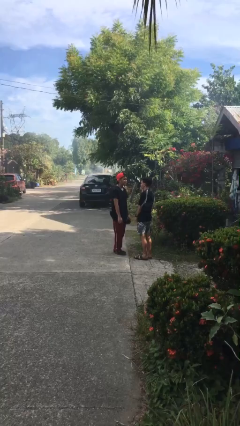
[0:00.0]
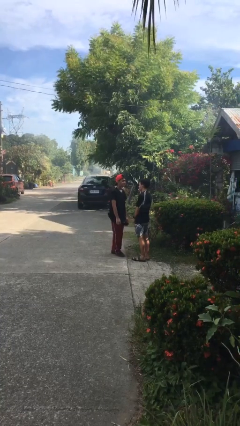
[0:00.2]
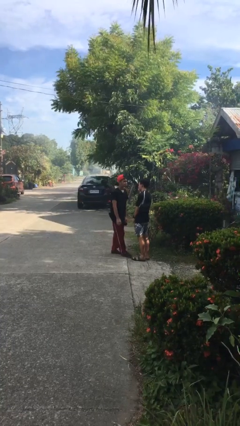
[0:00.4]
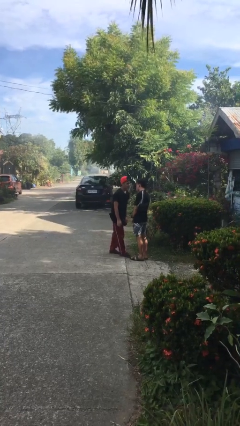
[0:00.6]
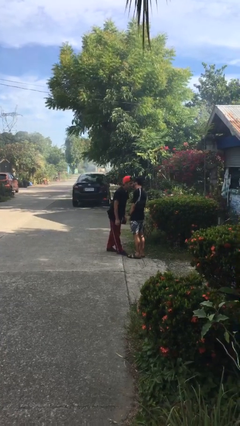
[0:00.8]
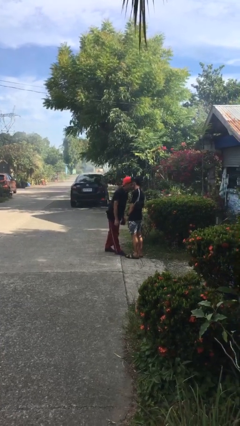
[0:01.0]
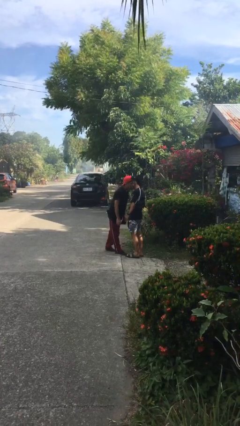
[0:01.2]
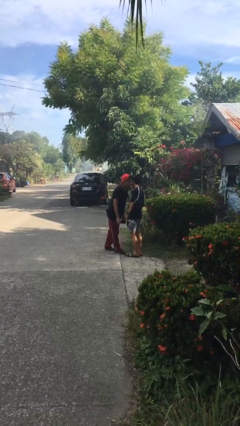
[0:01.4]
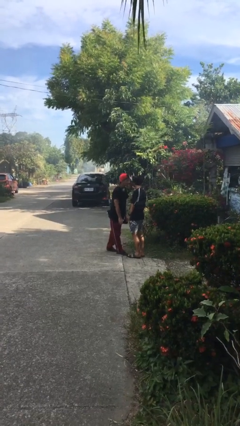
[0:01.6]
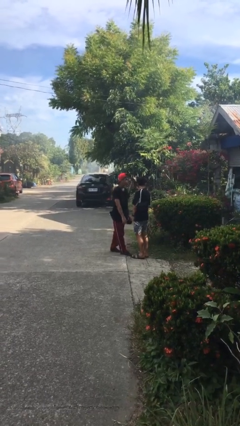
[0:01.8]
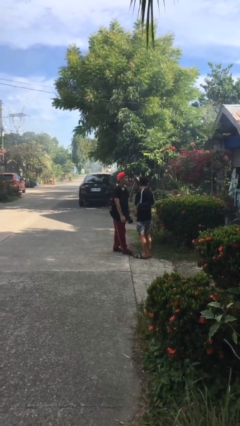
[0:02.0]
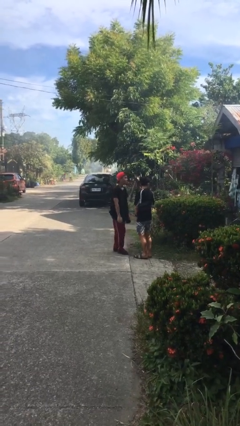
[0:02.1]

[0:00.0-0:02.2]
person kisses cheek of person

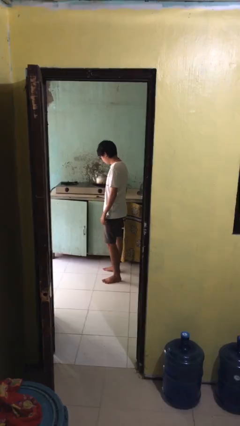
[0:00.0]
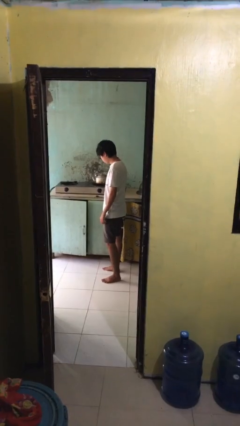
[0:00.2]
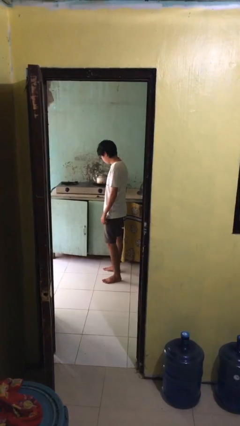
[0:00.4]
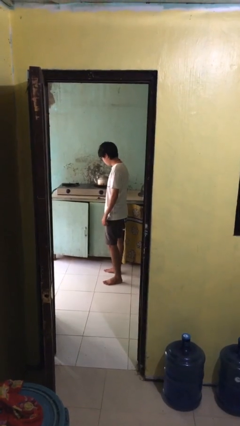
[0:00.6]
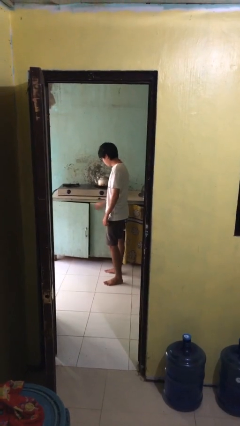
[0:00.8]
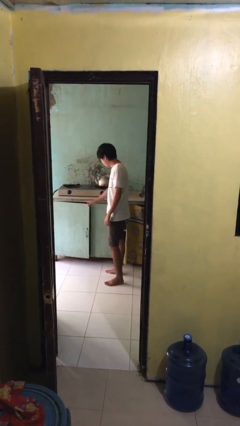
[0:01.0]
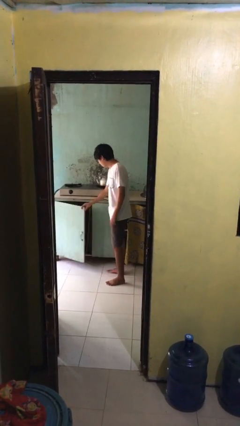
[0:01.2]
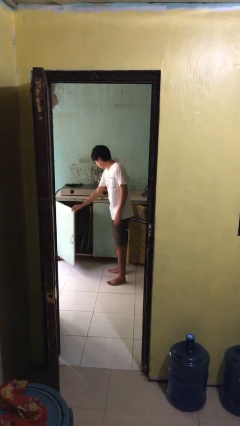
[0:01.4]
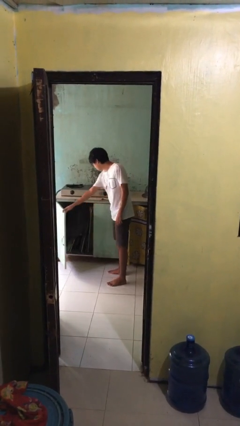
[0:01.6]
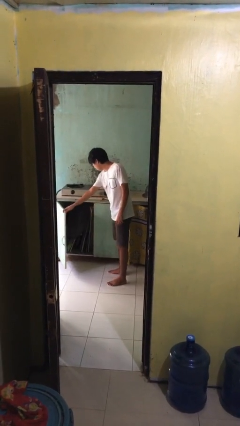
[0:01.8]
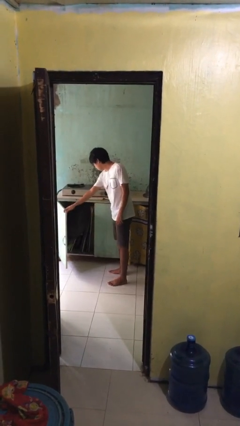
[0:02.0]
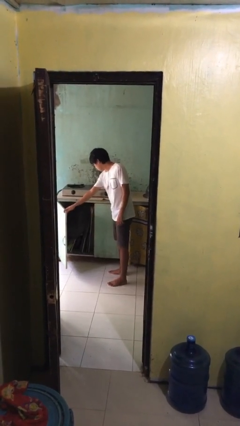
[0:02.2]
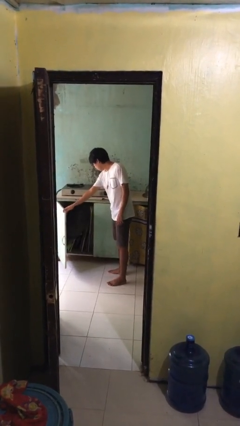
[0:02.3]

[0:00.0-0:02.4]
person opens cabinet

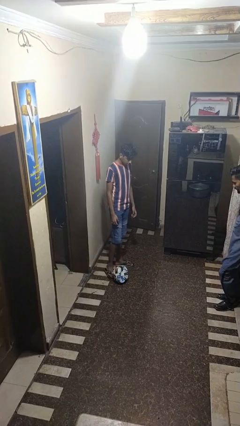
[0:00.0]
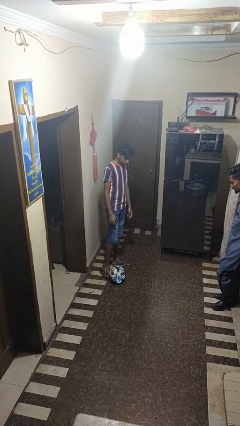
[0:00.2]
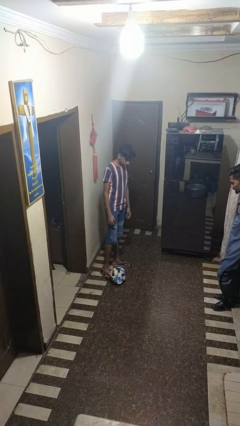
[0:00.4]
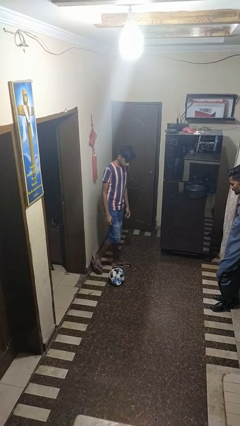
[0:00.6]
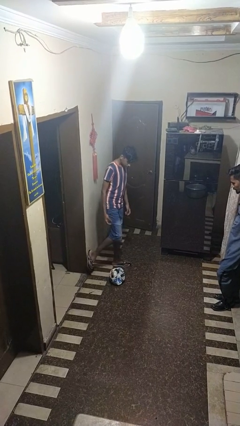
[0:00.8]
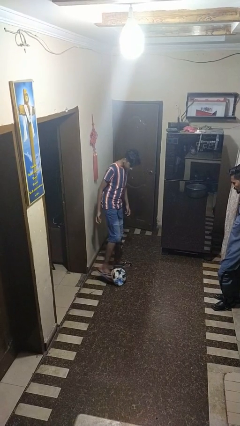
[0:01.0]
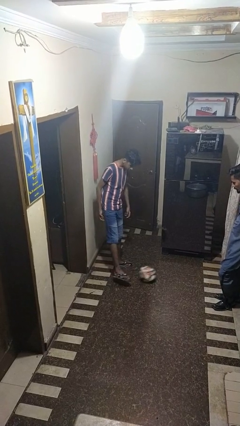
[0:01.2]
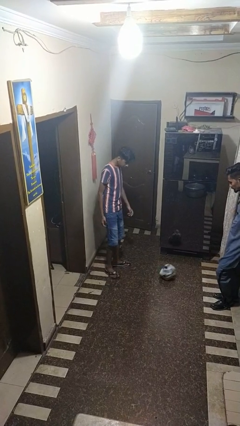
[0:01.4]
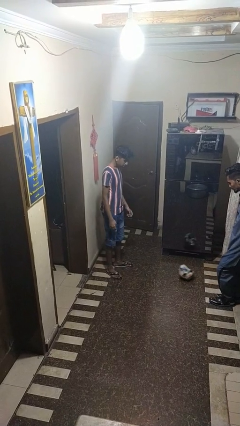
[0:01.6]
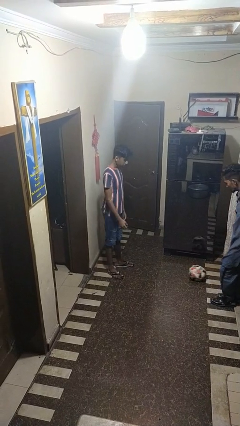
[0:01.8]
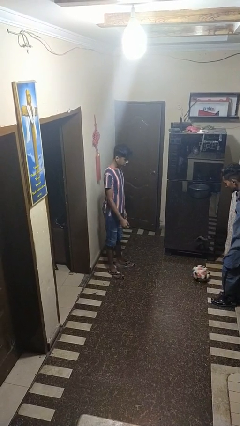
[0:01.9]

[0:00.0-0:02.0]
person kicks object to person

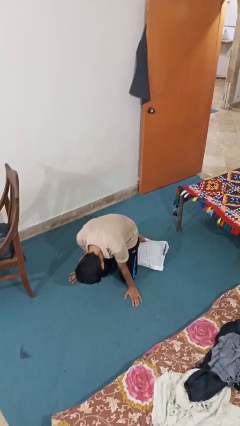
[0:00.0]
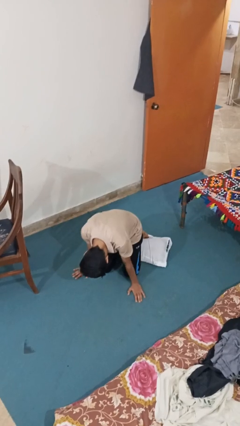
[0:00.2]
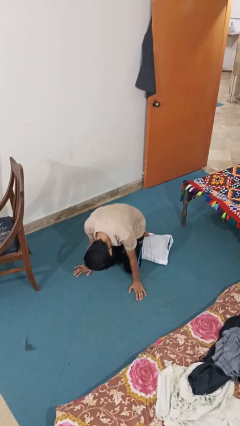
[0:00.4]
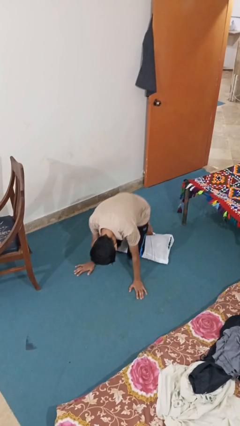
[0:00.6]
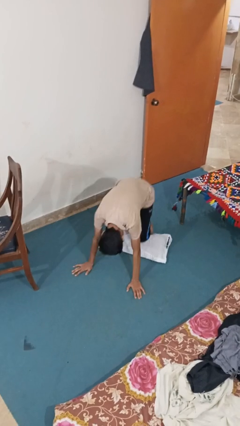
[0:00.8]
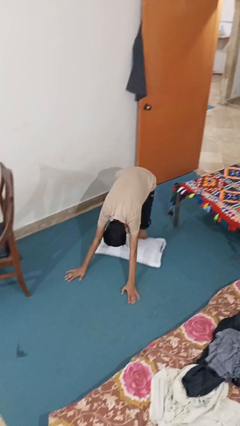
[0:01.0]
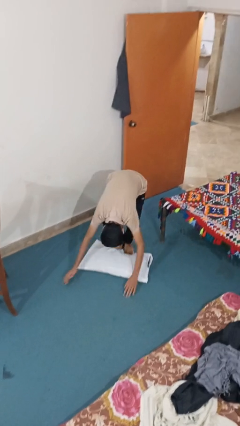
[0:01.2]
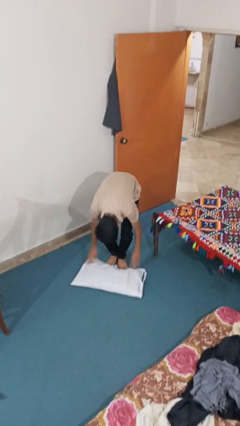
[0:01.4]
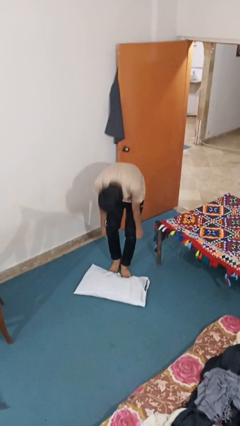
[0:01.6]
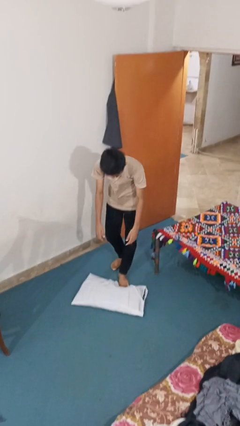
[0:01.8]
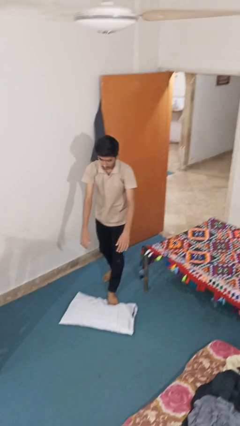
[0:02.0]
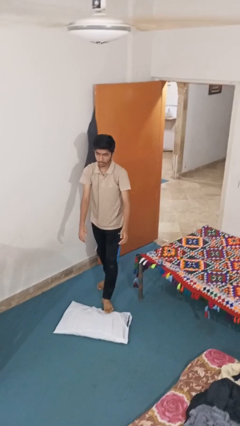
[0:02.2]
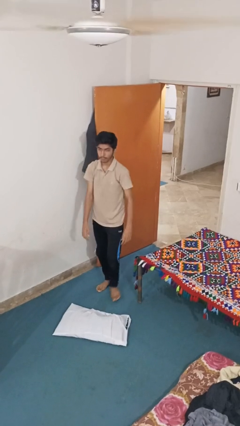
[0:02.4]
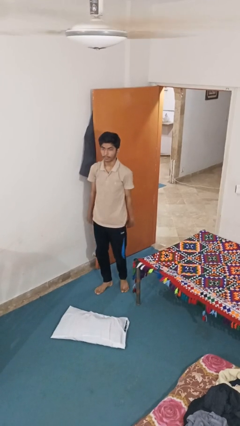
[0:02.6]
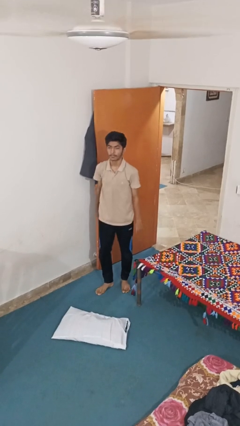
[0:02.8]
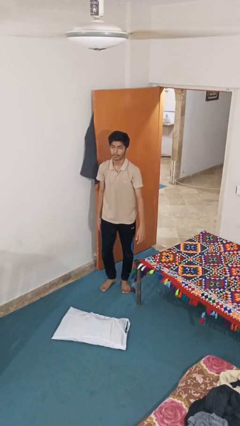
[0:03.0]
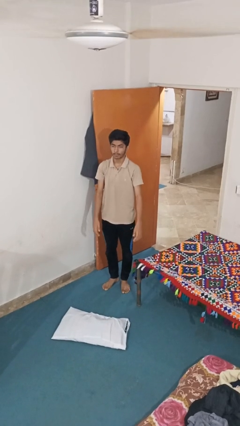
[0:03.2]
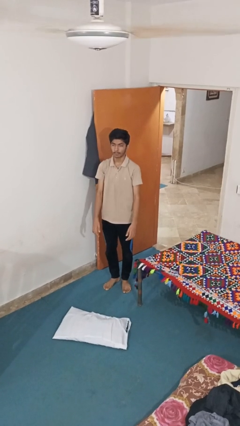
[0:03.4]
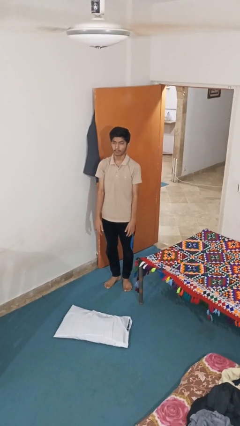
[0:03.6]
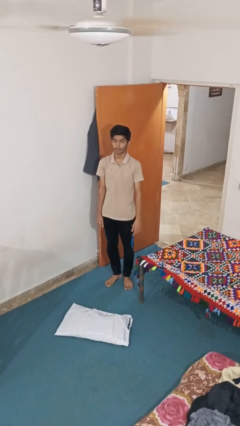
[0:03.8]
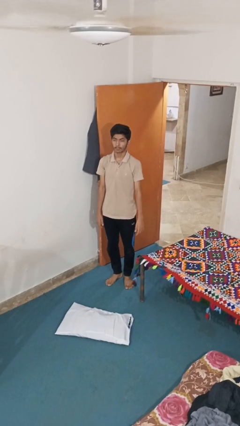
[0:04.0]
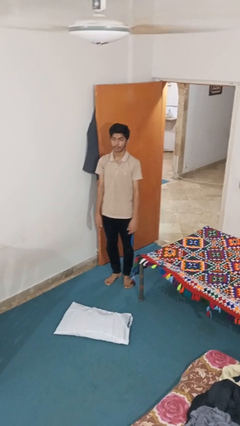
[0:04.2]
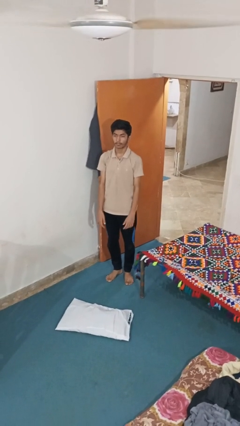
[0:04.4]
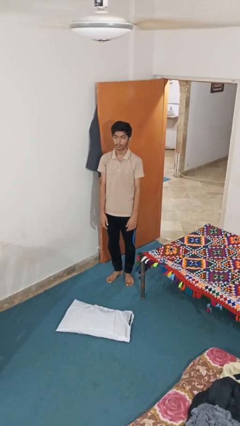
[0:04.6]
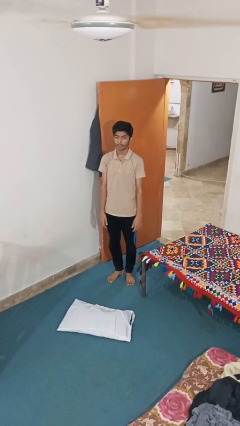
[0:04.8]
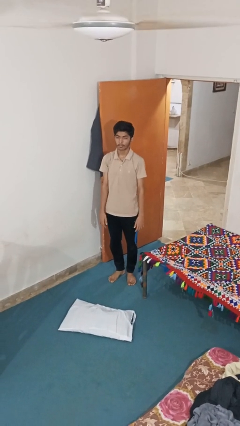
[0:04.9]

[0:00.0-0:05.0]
person stands up from floor

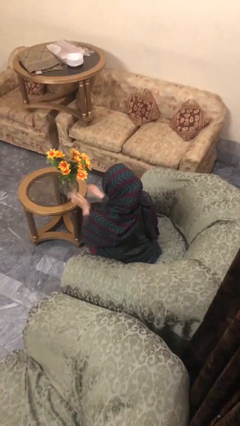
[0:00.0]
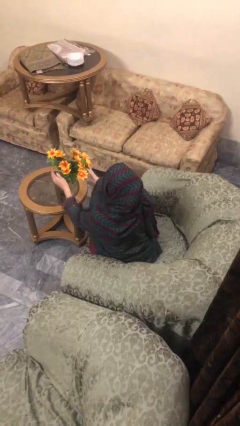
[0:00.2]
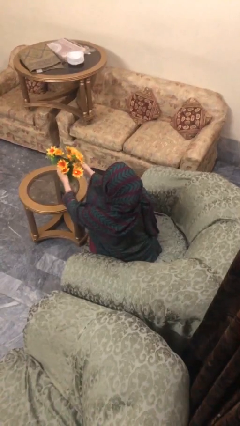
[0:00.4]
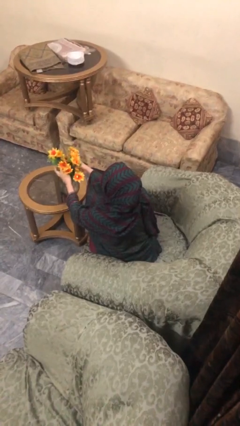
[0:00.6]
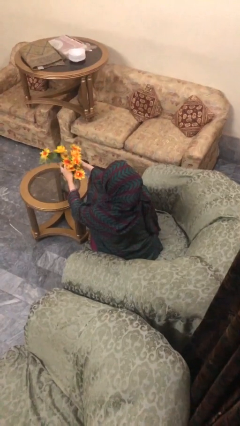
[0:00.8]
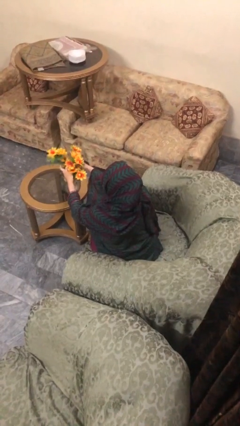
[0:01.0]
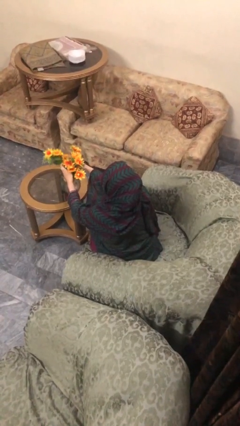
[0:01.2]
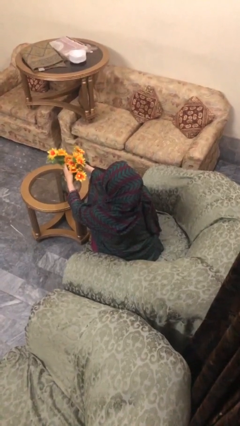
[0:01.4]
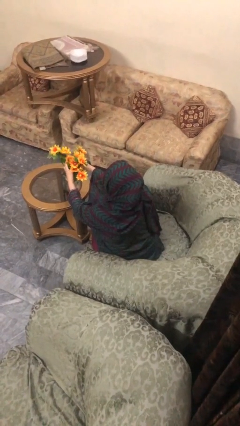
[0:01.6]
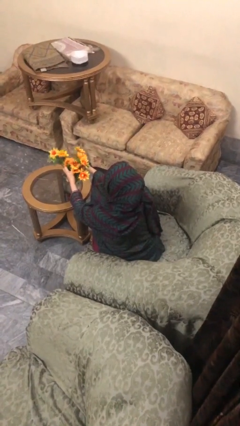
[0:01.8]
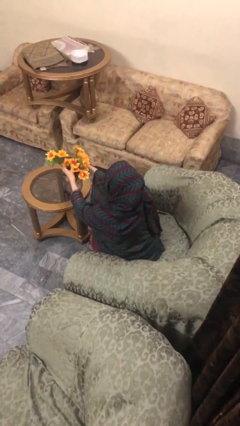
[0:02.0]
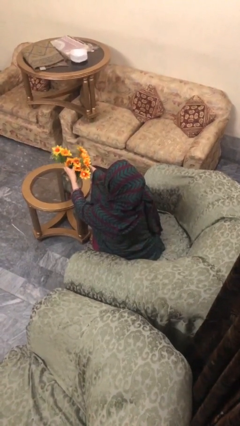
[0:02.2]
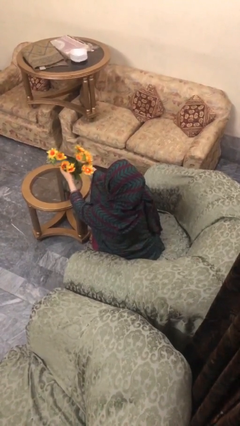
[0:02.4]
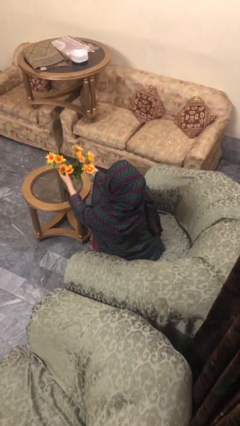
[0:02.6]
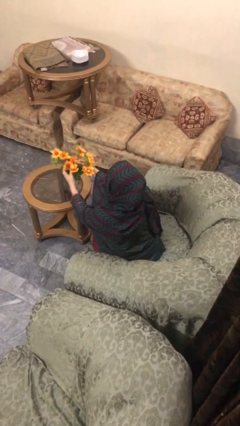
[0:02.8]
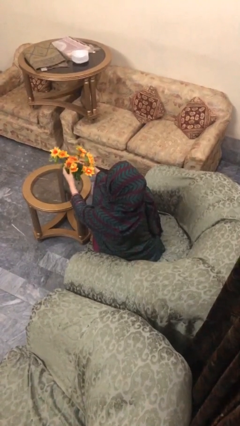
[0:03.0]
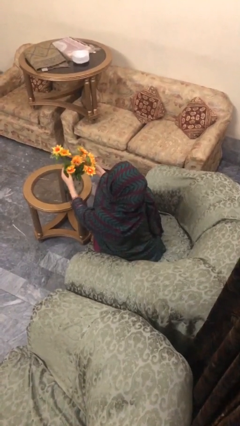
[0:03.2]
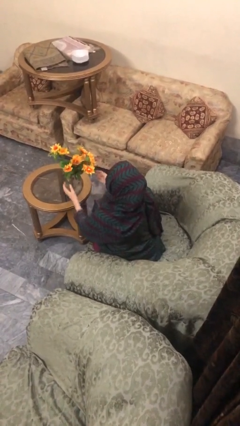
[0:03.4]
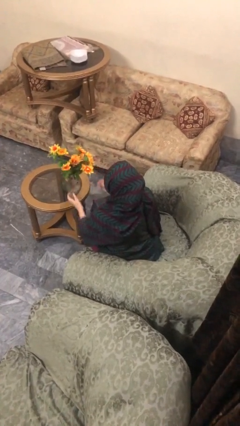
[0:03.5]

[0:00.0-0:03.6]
person arranges flowers in vase

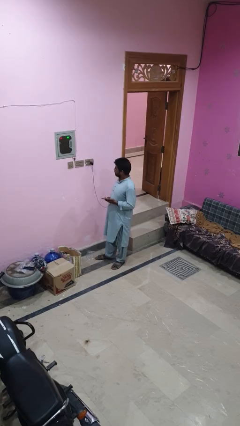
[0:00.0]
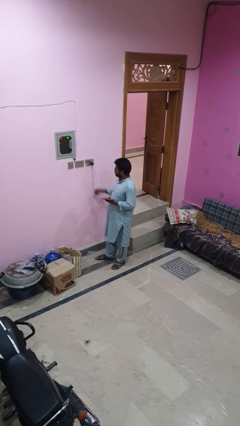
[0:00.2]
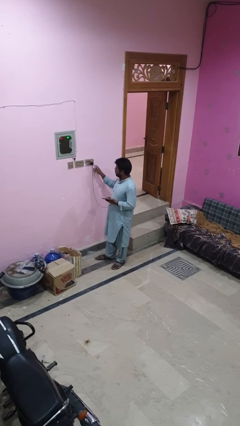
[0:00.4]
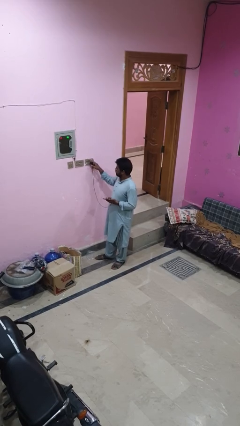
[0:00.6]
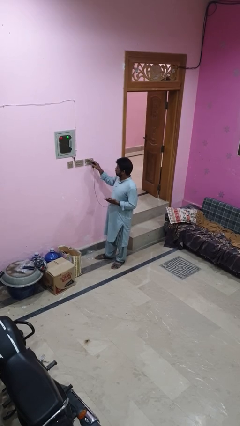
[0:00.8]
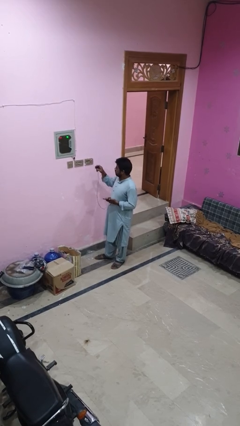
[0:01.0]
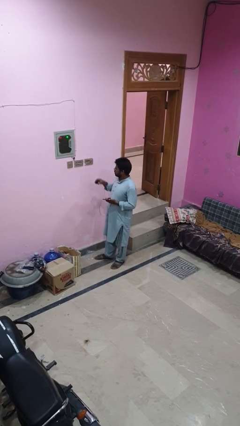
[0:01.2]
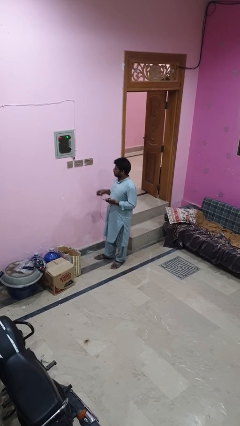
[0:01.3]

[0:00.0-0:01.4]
person unplugs from electrical socket

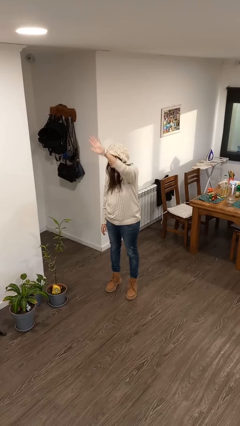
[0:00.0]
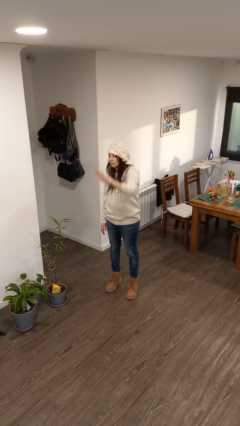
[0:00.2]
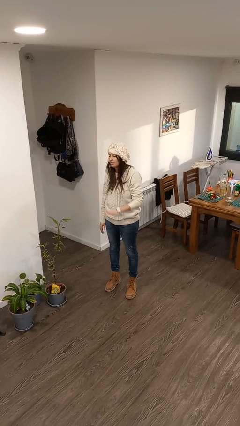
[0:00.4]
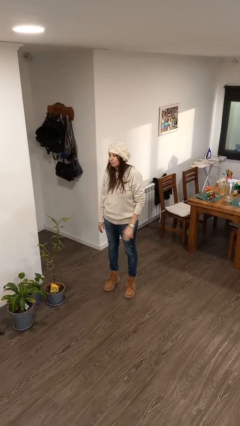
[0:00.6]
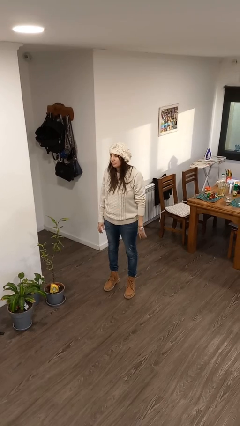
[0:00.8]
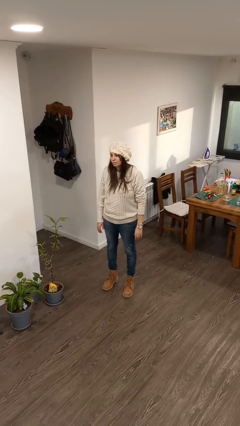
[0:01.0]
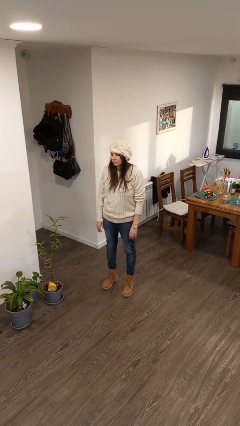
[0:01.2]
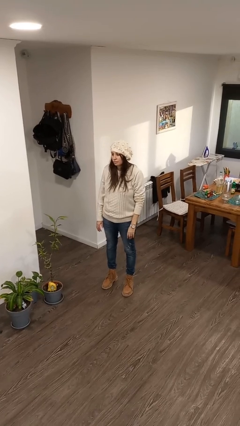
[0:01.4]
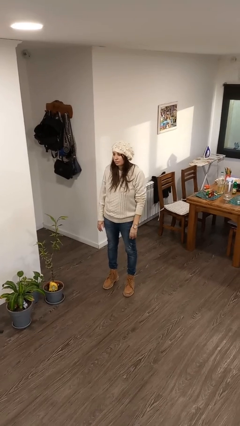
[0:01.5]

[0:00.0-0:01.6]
person gestures lower hand
